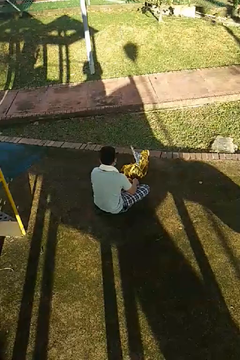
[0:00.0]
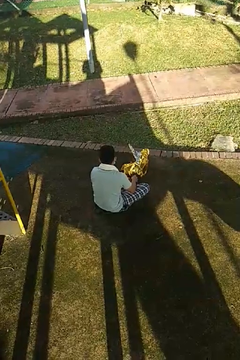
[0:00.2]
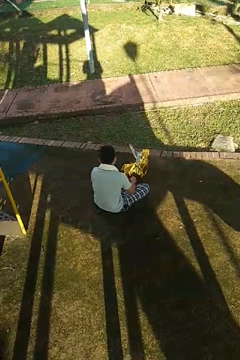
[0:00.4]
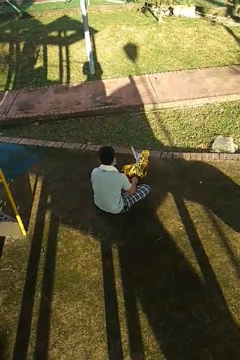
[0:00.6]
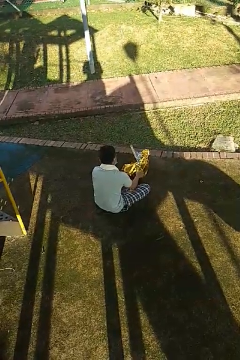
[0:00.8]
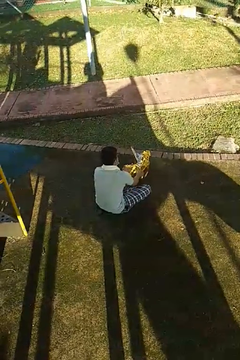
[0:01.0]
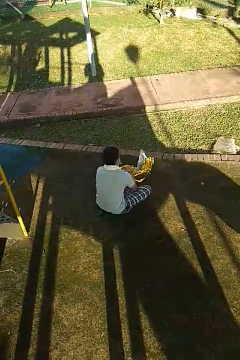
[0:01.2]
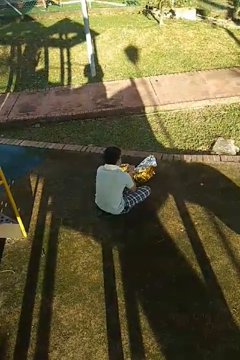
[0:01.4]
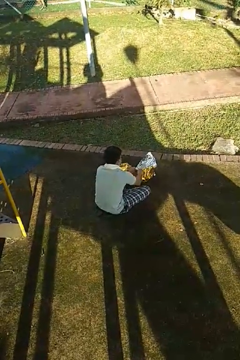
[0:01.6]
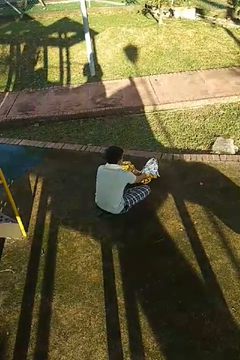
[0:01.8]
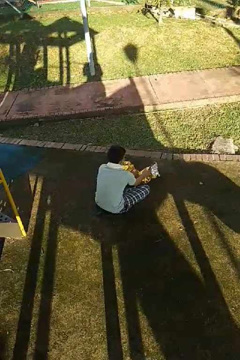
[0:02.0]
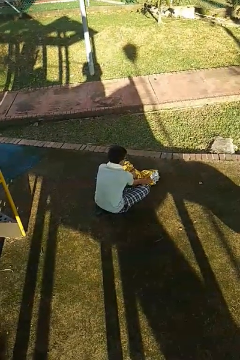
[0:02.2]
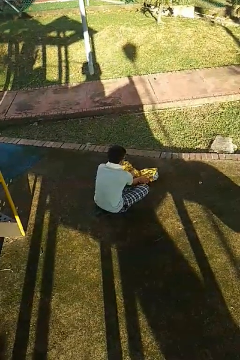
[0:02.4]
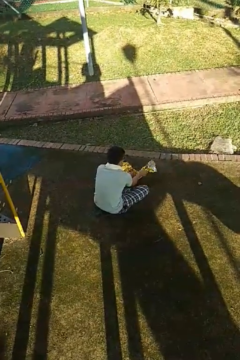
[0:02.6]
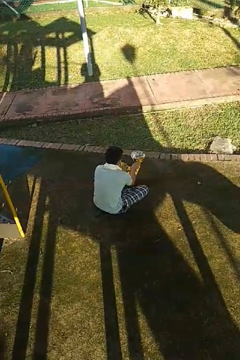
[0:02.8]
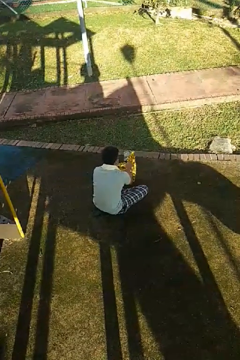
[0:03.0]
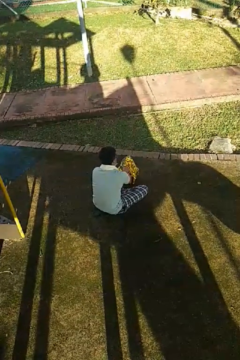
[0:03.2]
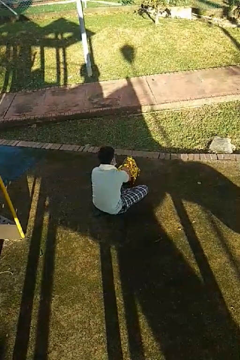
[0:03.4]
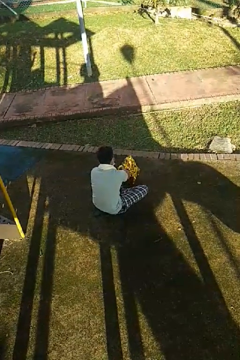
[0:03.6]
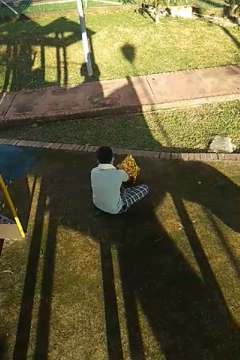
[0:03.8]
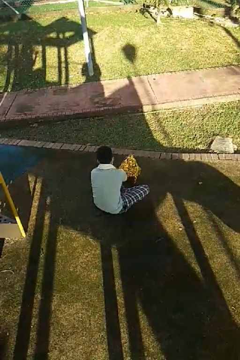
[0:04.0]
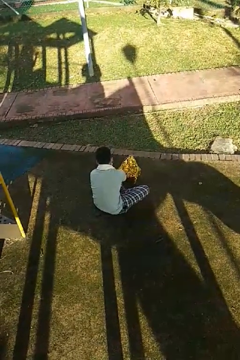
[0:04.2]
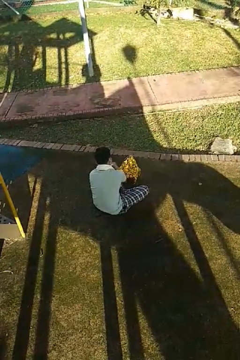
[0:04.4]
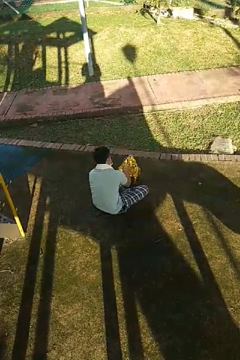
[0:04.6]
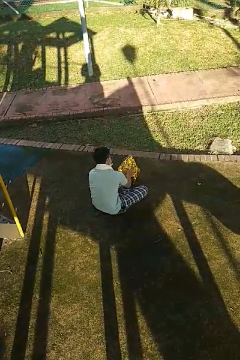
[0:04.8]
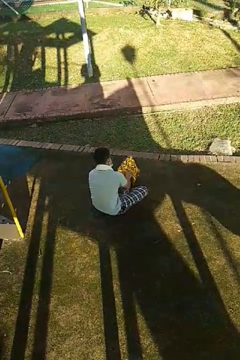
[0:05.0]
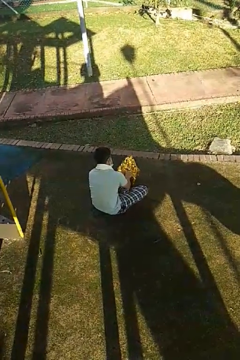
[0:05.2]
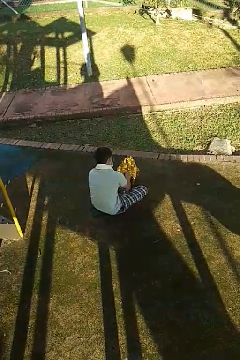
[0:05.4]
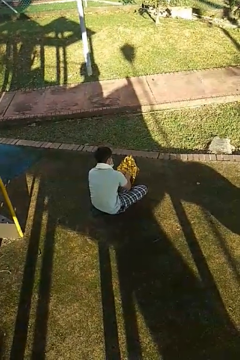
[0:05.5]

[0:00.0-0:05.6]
person wraps box

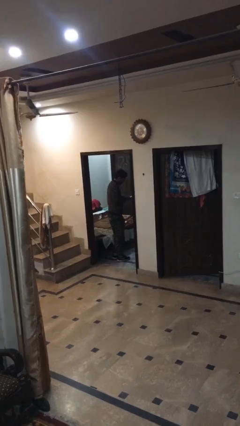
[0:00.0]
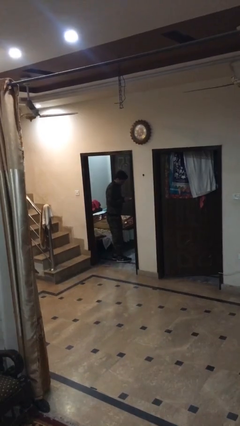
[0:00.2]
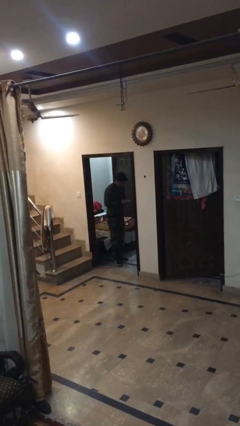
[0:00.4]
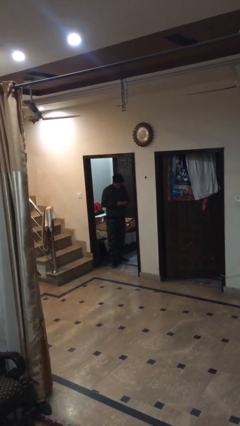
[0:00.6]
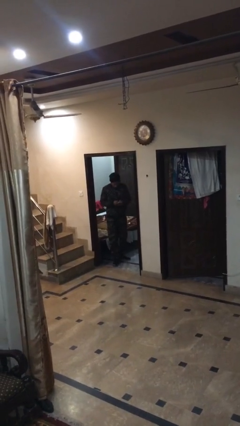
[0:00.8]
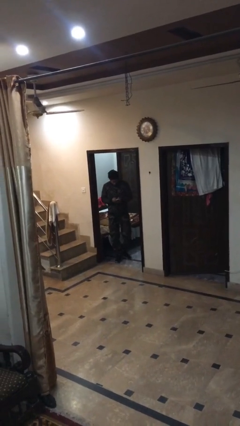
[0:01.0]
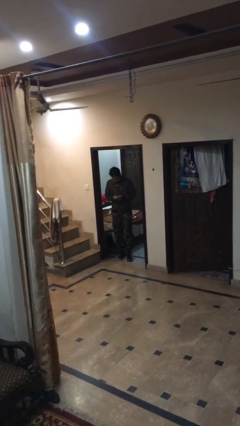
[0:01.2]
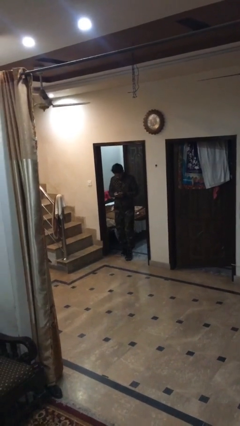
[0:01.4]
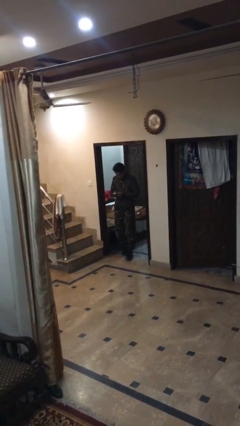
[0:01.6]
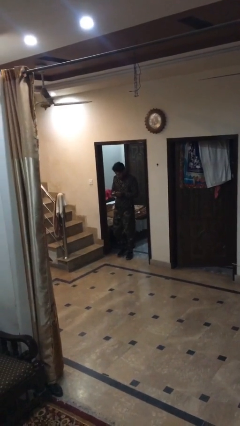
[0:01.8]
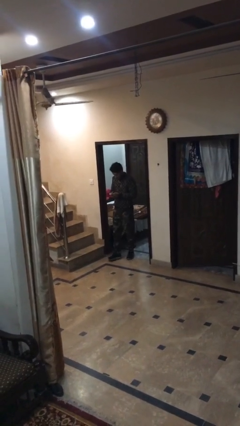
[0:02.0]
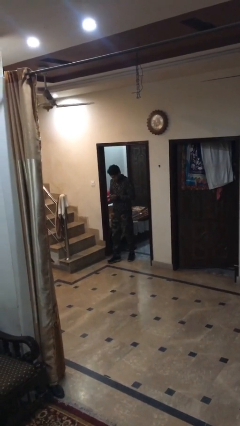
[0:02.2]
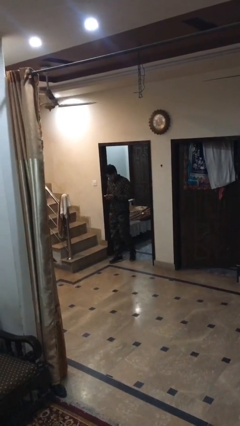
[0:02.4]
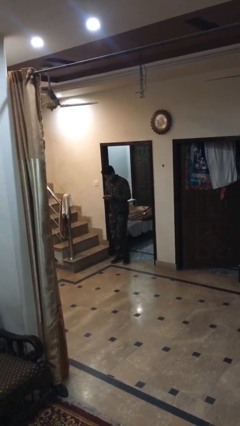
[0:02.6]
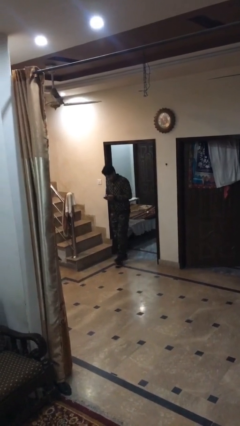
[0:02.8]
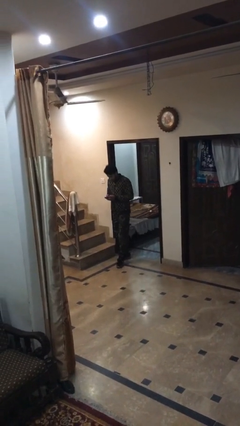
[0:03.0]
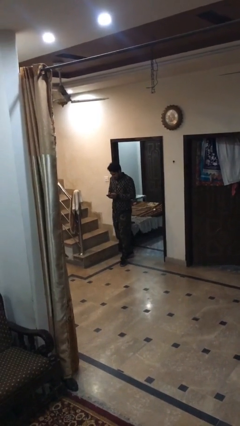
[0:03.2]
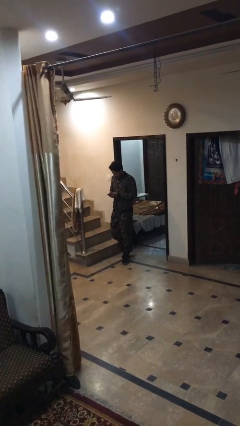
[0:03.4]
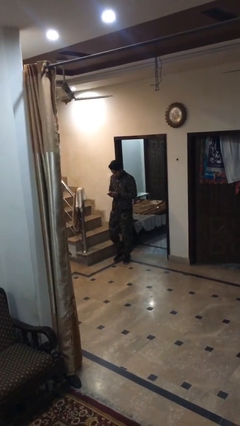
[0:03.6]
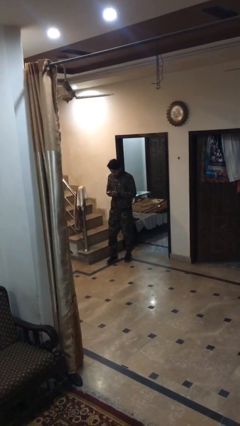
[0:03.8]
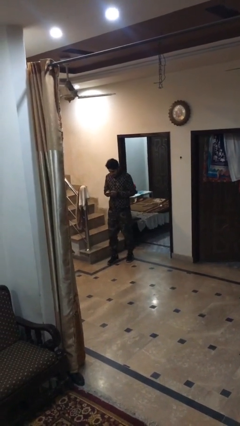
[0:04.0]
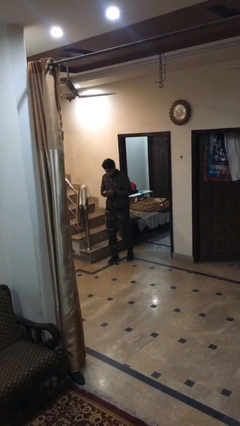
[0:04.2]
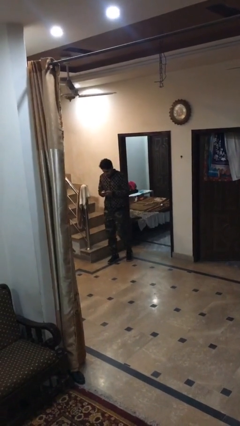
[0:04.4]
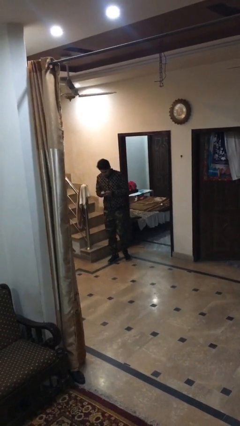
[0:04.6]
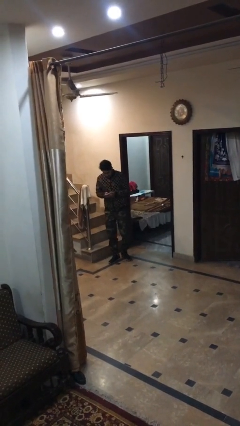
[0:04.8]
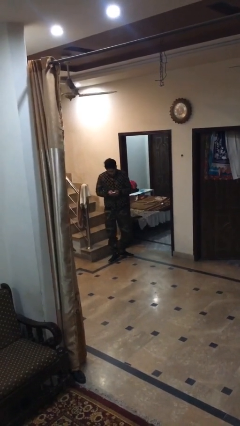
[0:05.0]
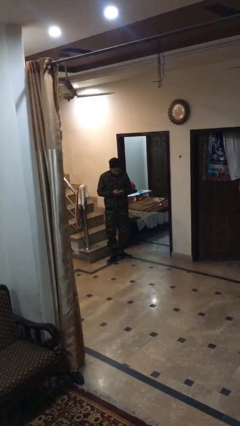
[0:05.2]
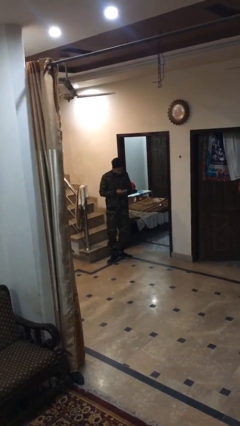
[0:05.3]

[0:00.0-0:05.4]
person exits scene through structure

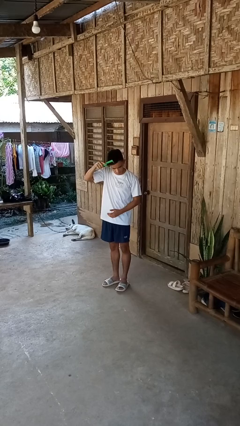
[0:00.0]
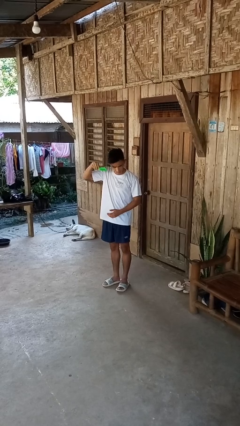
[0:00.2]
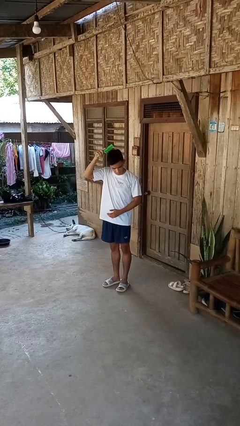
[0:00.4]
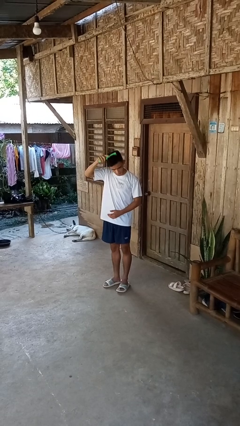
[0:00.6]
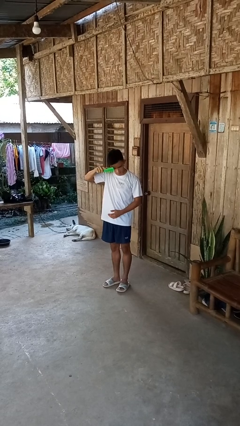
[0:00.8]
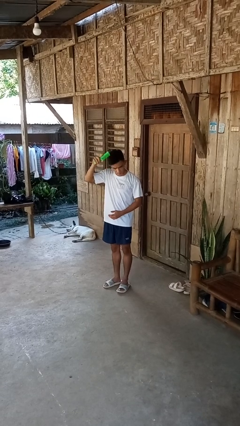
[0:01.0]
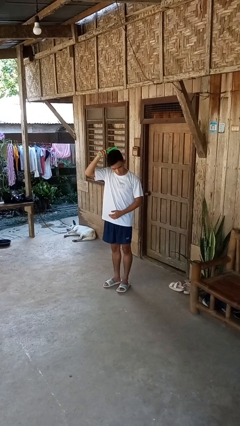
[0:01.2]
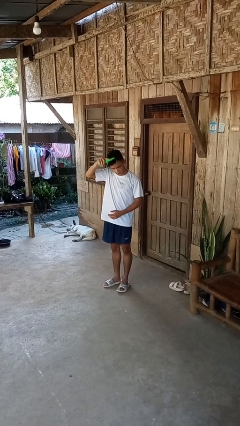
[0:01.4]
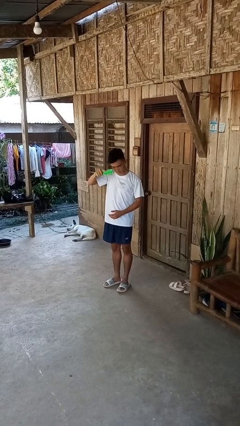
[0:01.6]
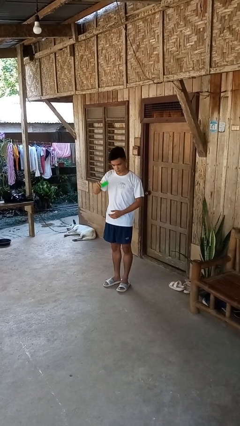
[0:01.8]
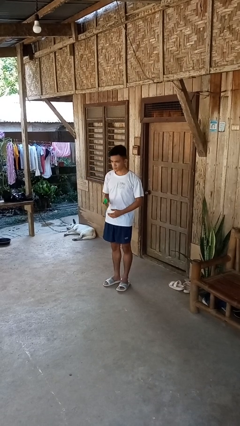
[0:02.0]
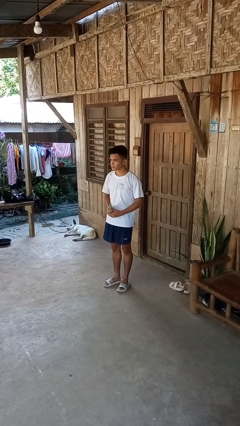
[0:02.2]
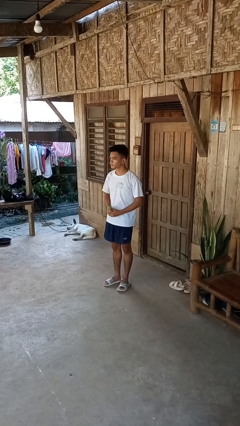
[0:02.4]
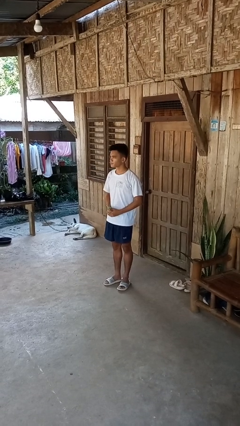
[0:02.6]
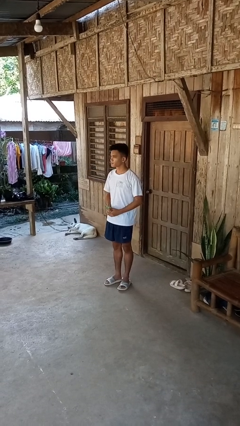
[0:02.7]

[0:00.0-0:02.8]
person brushes hair

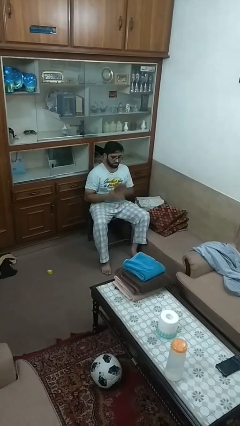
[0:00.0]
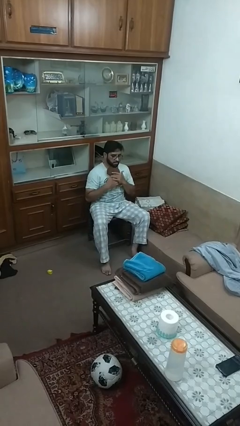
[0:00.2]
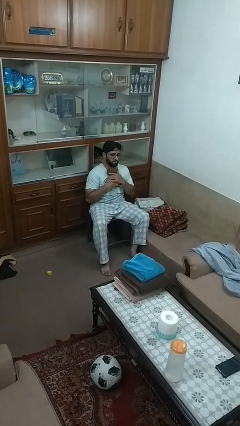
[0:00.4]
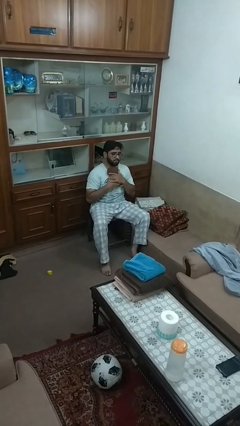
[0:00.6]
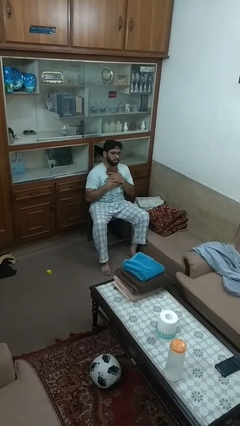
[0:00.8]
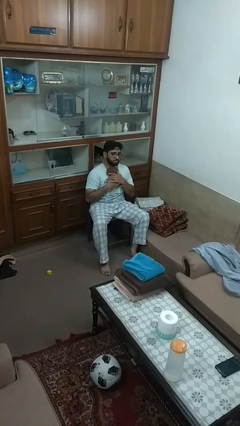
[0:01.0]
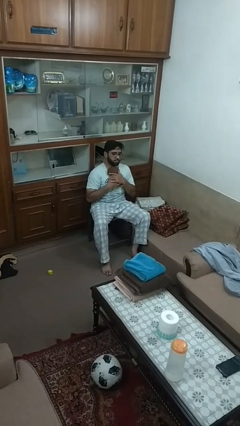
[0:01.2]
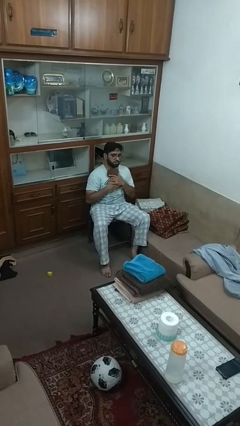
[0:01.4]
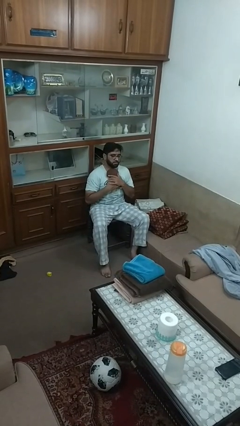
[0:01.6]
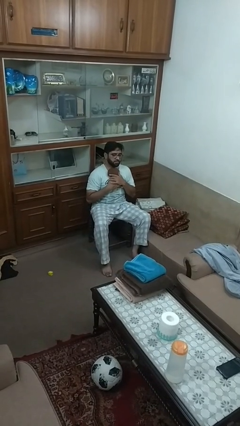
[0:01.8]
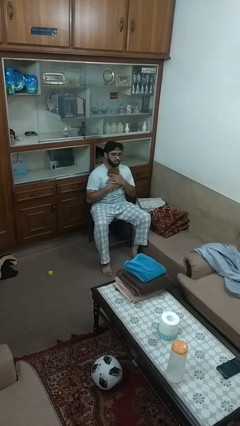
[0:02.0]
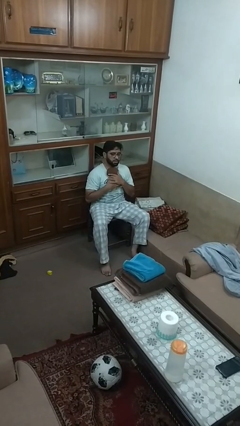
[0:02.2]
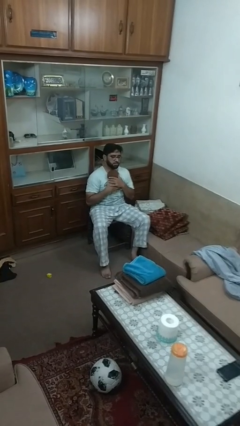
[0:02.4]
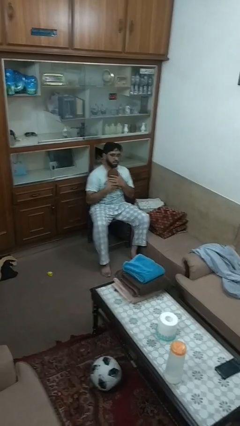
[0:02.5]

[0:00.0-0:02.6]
person hugs stuffed animal

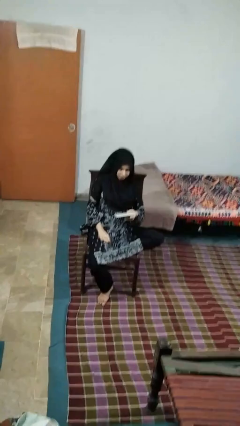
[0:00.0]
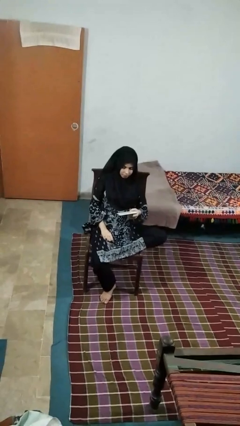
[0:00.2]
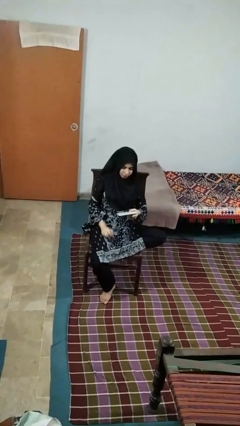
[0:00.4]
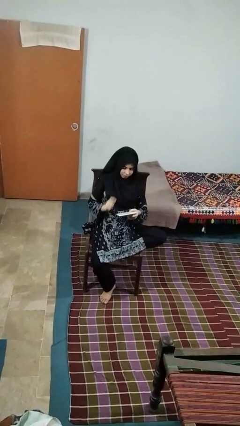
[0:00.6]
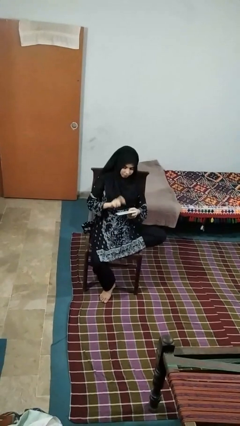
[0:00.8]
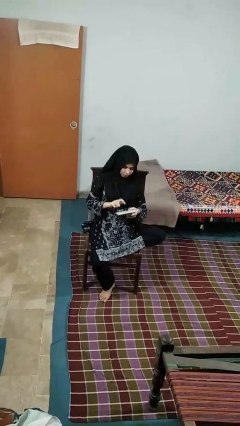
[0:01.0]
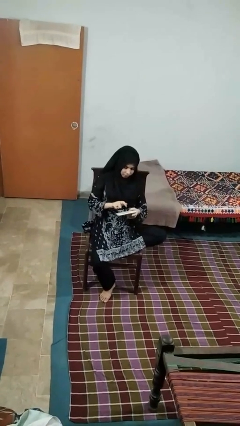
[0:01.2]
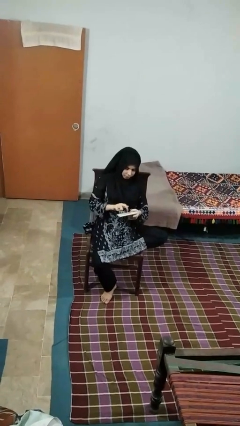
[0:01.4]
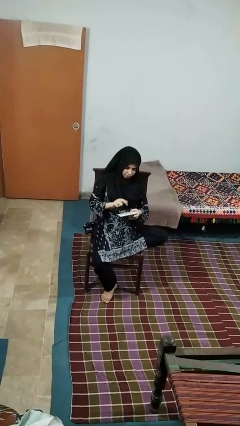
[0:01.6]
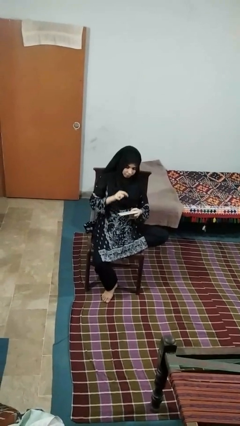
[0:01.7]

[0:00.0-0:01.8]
person taps object with finger
